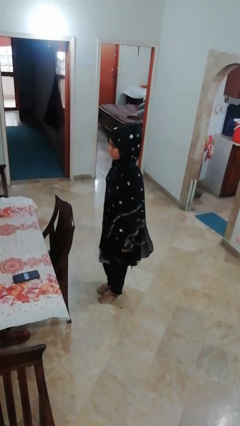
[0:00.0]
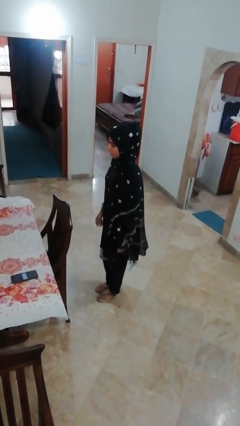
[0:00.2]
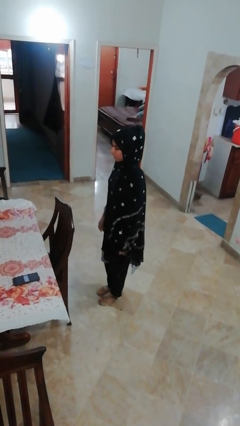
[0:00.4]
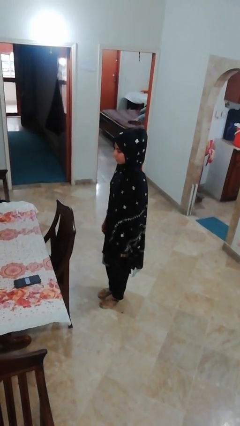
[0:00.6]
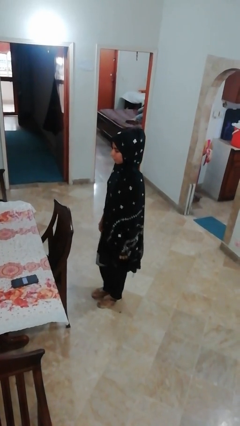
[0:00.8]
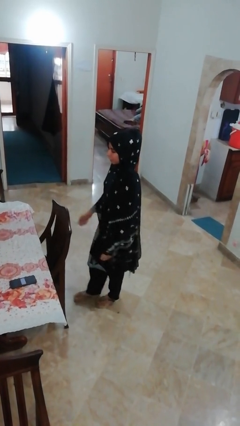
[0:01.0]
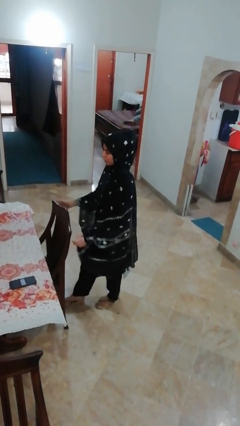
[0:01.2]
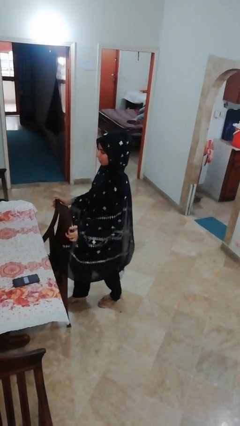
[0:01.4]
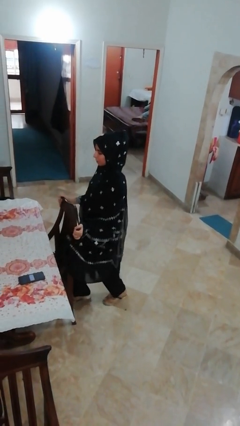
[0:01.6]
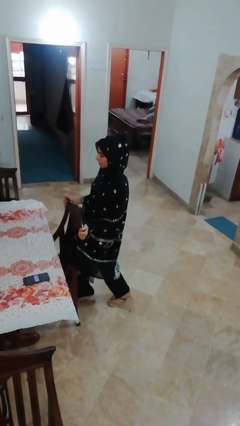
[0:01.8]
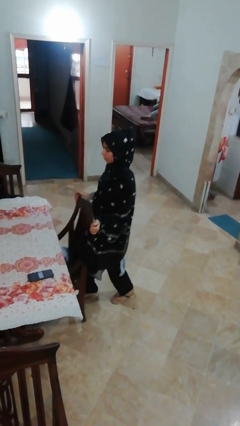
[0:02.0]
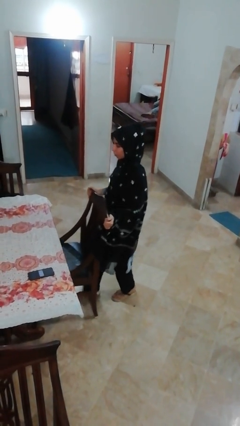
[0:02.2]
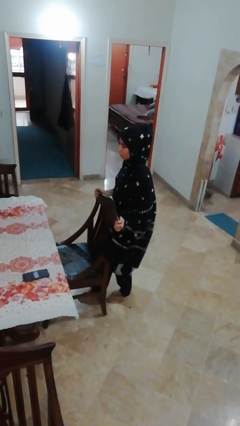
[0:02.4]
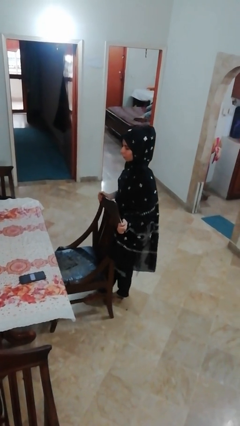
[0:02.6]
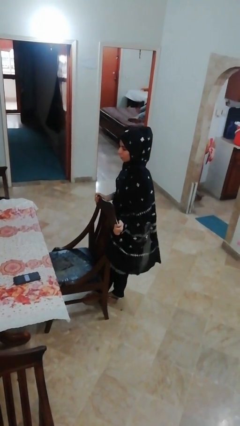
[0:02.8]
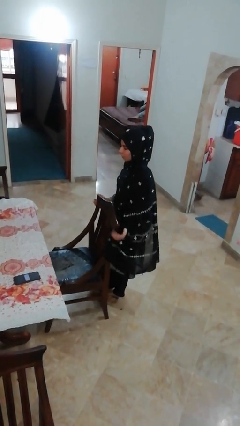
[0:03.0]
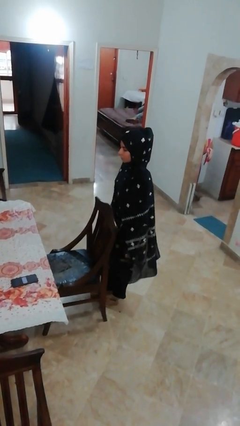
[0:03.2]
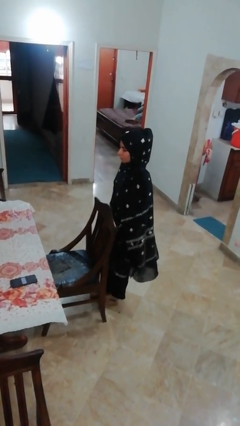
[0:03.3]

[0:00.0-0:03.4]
person pulls out chair

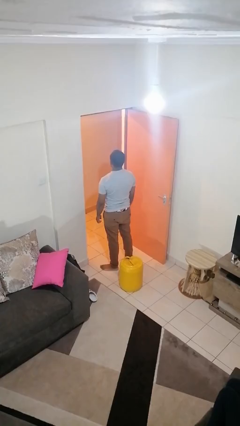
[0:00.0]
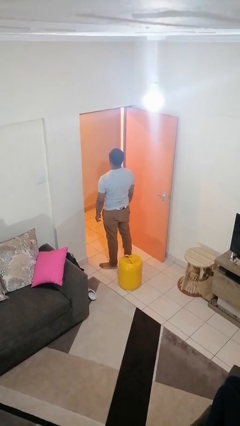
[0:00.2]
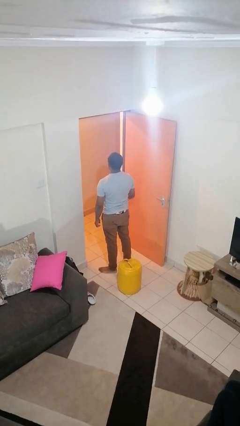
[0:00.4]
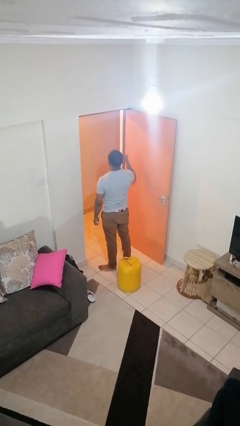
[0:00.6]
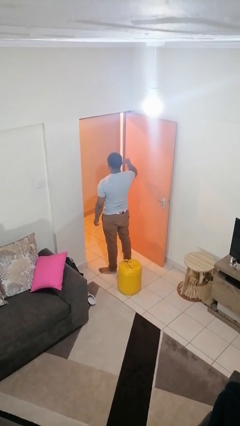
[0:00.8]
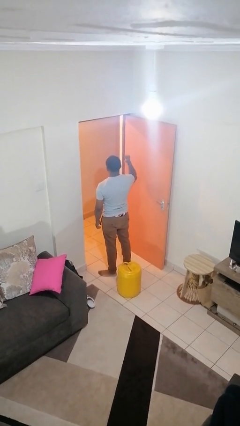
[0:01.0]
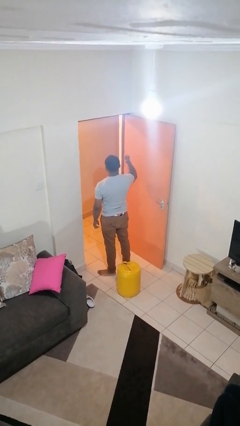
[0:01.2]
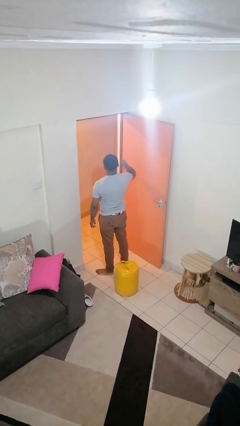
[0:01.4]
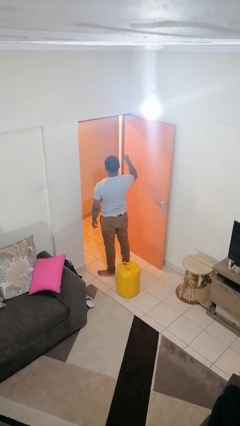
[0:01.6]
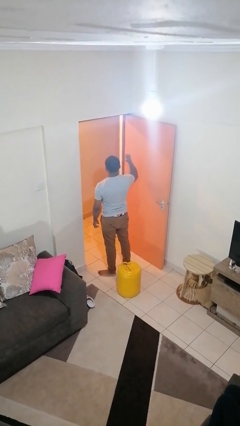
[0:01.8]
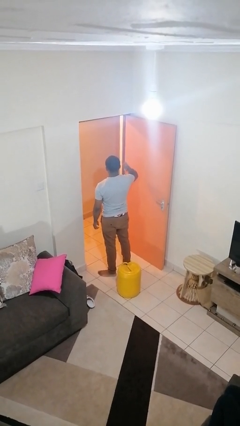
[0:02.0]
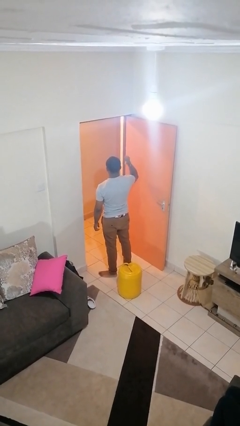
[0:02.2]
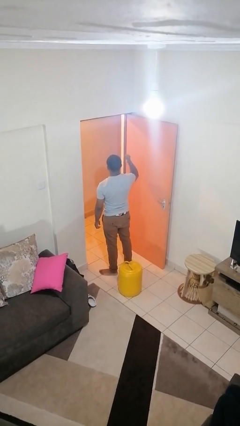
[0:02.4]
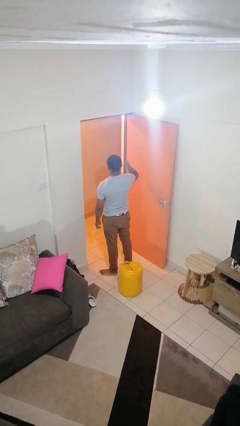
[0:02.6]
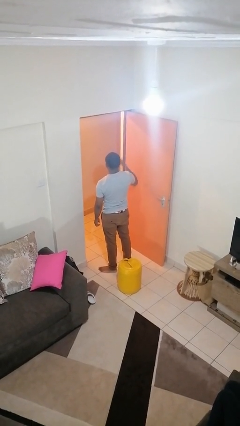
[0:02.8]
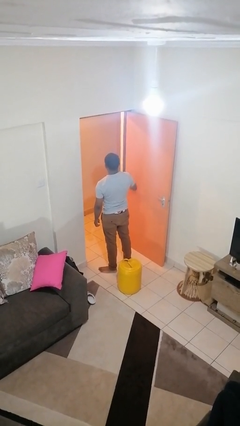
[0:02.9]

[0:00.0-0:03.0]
person gestures behind me

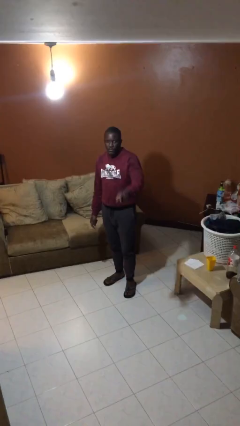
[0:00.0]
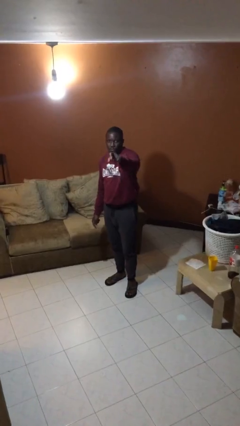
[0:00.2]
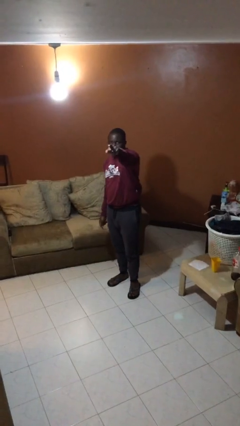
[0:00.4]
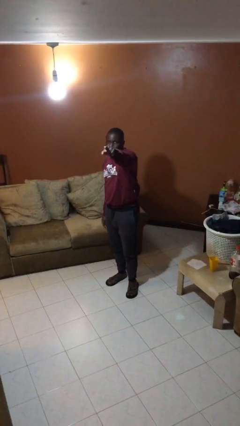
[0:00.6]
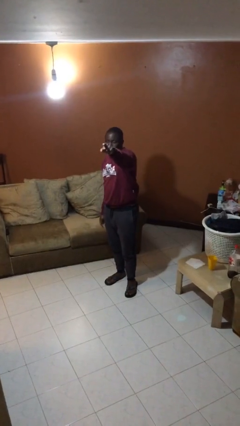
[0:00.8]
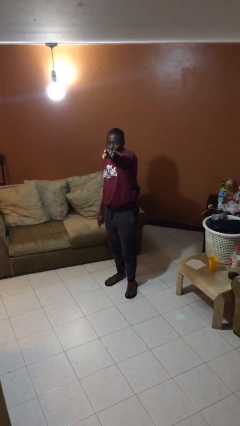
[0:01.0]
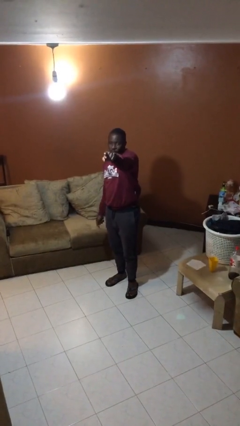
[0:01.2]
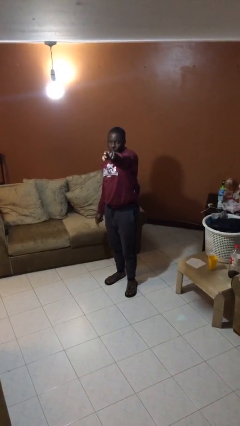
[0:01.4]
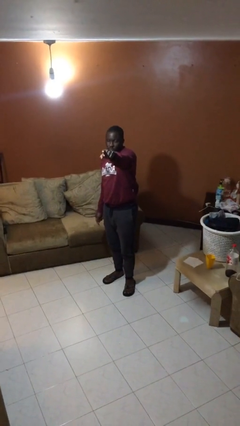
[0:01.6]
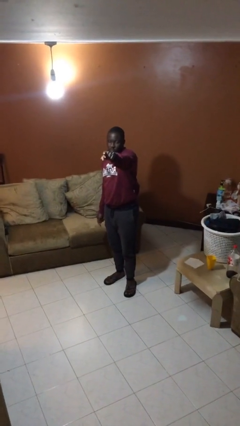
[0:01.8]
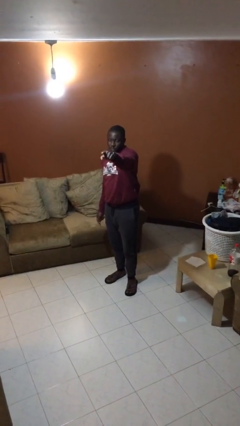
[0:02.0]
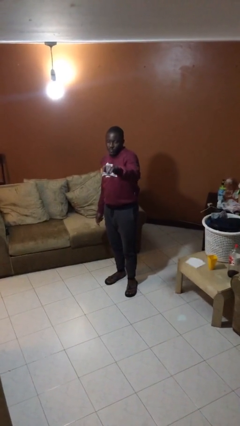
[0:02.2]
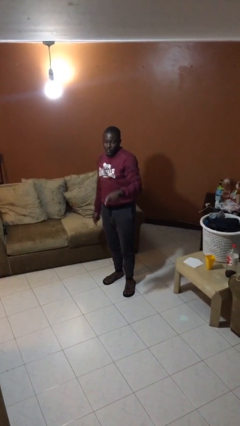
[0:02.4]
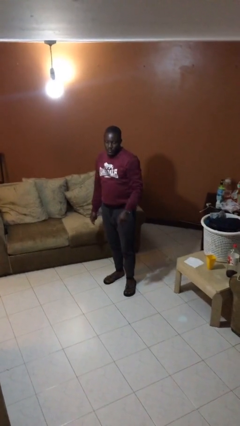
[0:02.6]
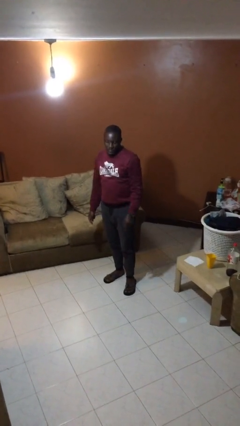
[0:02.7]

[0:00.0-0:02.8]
person points at person

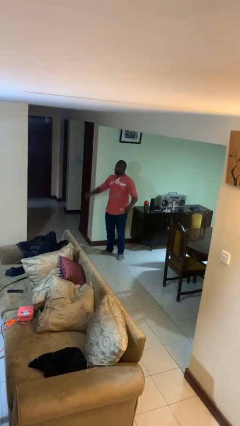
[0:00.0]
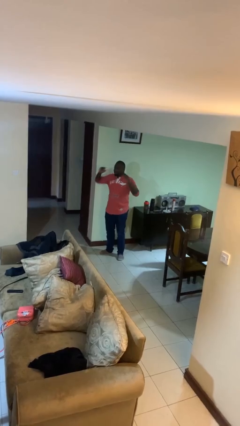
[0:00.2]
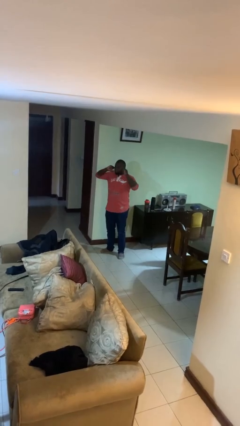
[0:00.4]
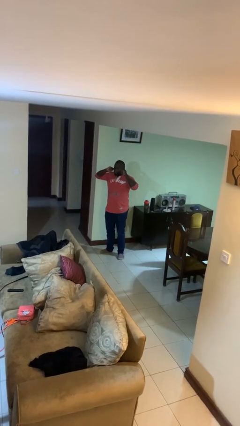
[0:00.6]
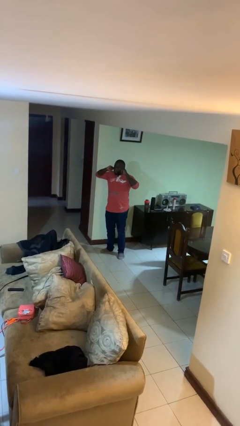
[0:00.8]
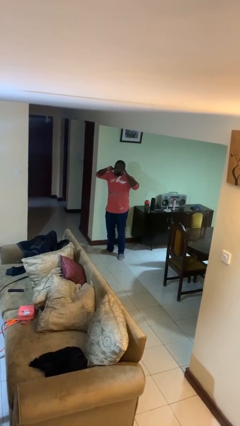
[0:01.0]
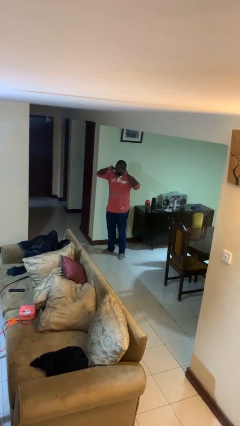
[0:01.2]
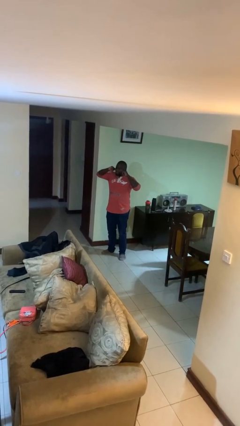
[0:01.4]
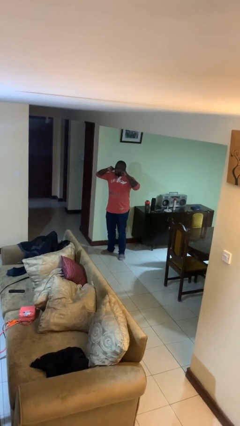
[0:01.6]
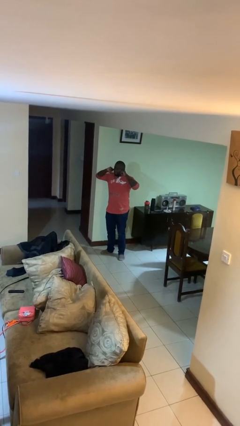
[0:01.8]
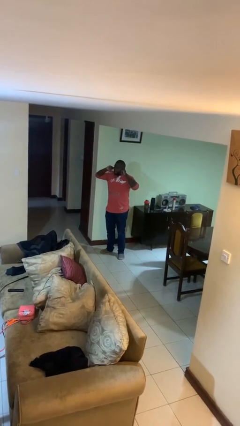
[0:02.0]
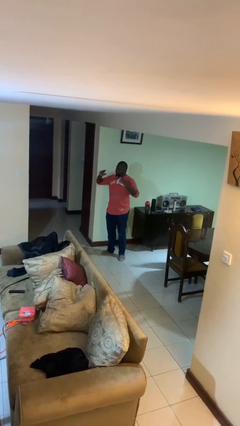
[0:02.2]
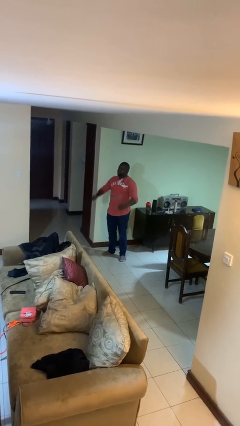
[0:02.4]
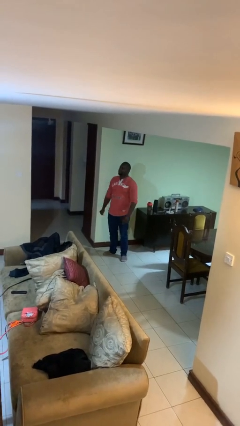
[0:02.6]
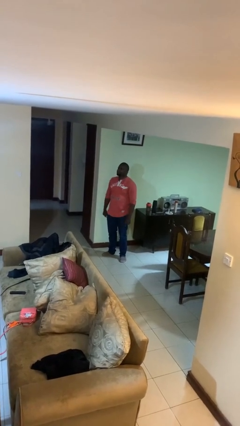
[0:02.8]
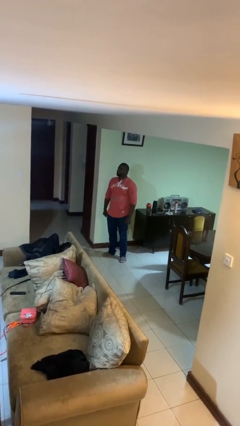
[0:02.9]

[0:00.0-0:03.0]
person puts fingers in ear

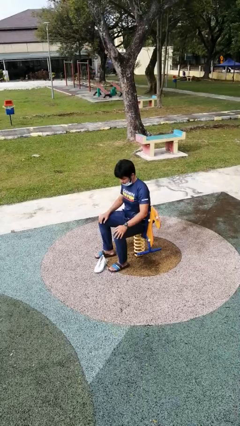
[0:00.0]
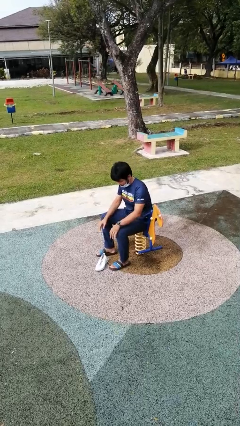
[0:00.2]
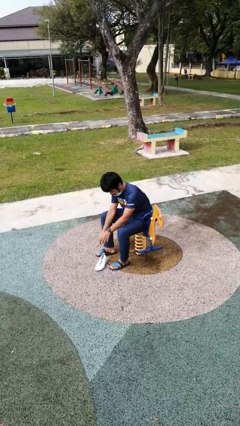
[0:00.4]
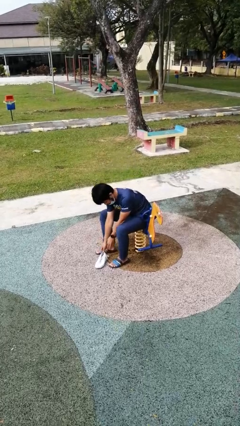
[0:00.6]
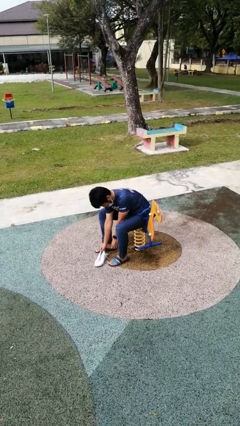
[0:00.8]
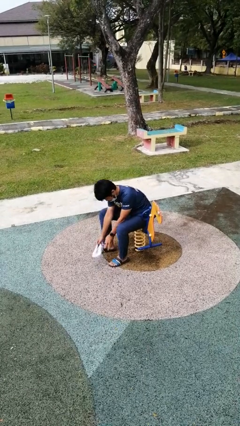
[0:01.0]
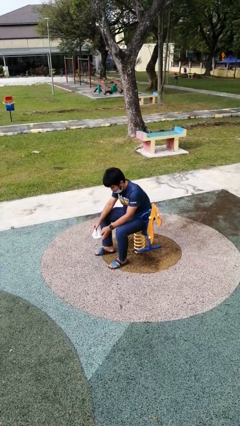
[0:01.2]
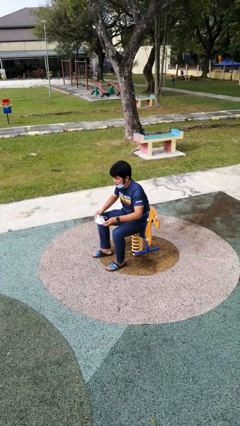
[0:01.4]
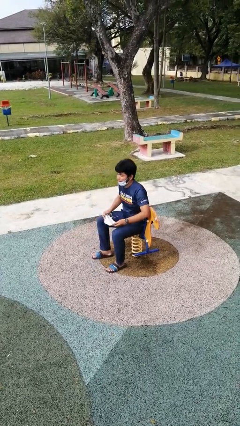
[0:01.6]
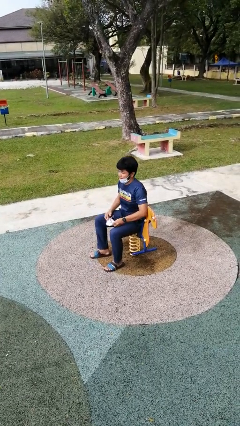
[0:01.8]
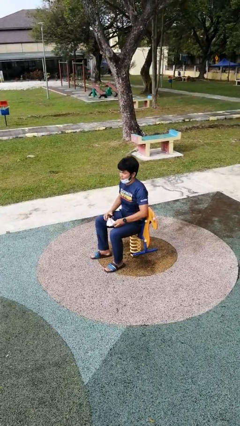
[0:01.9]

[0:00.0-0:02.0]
person picks up object from floor

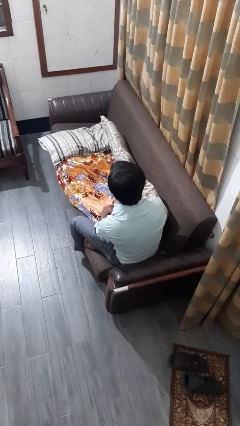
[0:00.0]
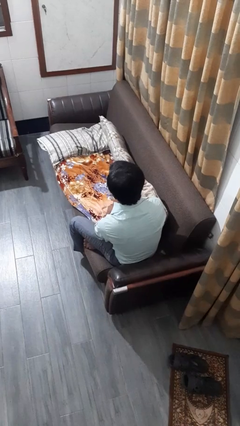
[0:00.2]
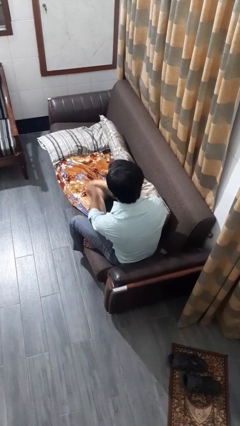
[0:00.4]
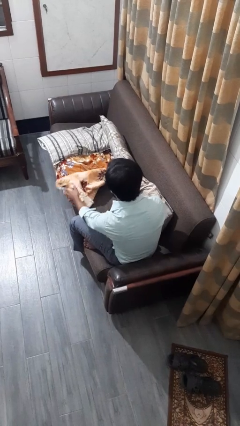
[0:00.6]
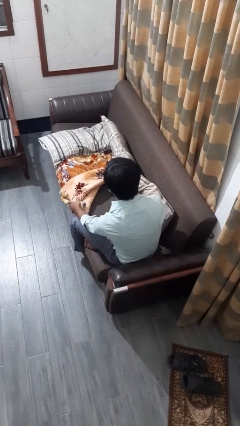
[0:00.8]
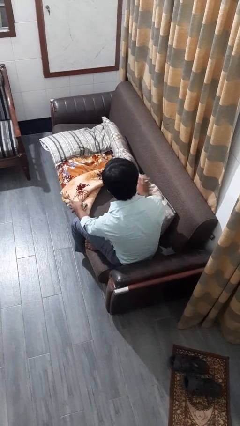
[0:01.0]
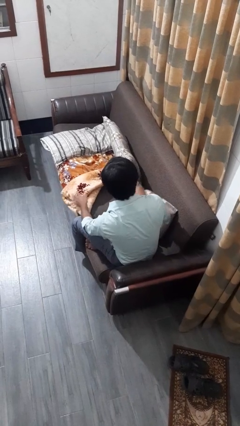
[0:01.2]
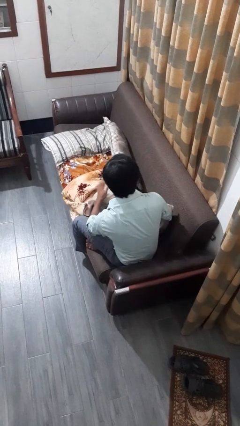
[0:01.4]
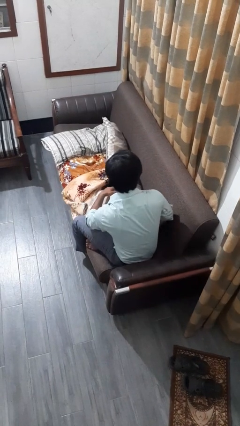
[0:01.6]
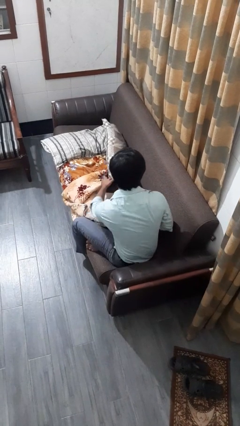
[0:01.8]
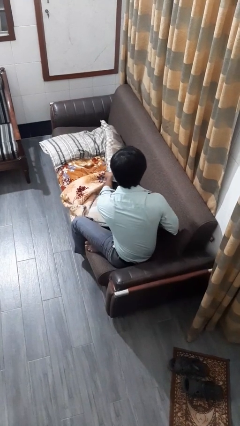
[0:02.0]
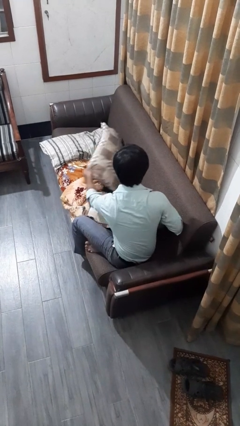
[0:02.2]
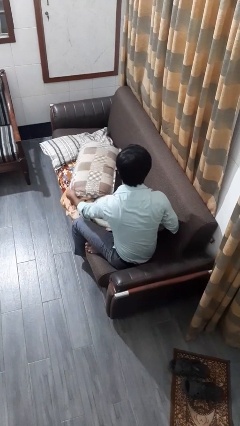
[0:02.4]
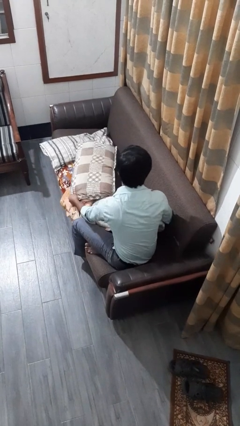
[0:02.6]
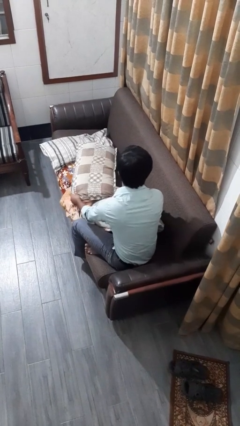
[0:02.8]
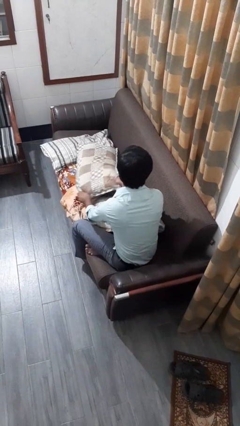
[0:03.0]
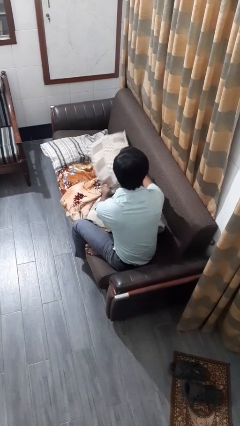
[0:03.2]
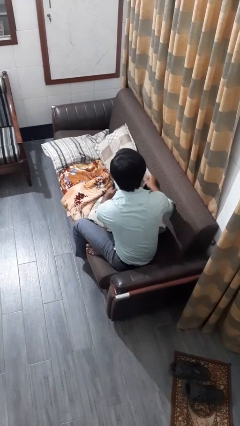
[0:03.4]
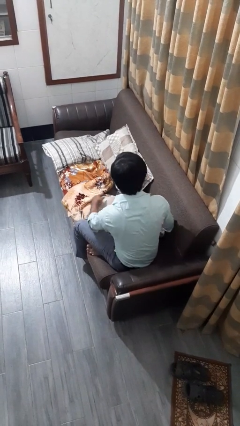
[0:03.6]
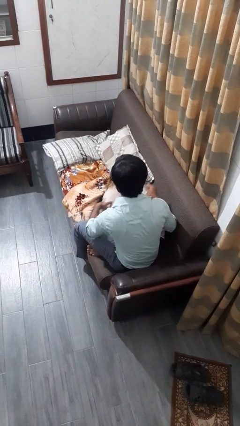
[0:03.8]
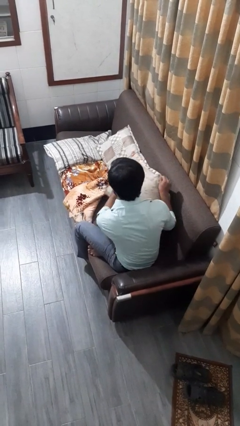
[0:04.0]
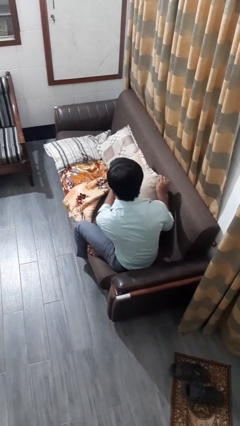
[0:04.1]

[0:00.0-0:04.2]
person searches in couch
